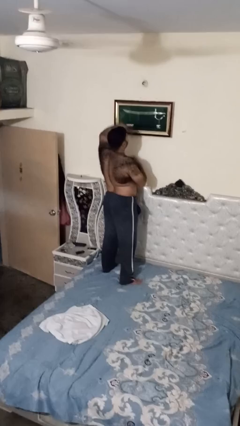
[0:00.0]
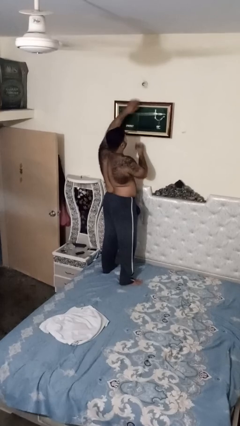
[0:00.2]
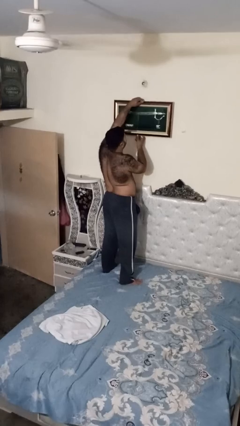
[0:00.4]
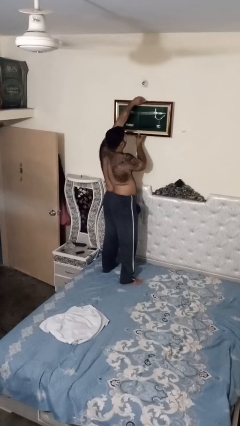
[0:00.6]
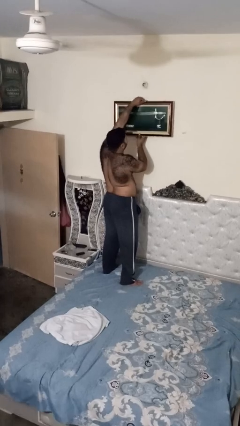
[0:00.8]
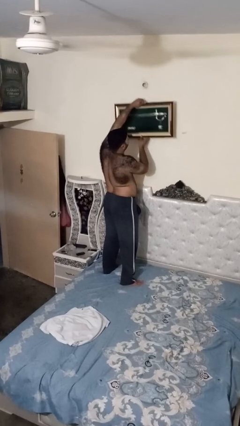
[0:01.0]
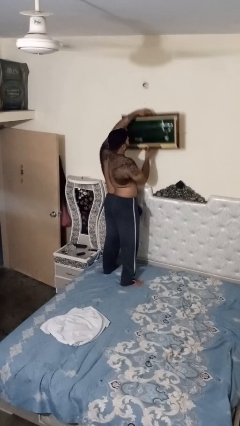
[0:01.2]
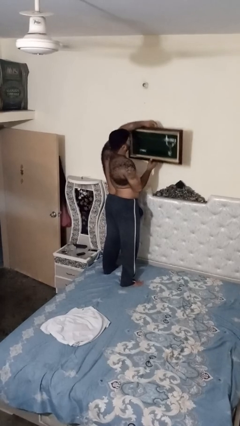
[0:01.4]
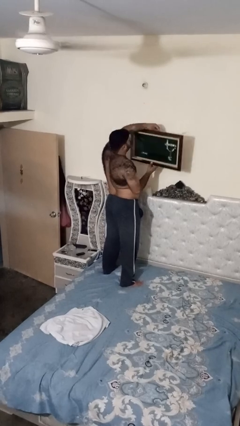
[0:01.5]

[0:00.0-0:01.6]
person takes down picture frame

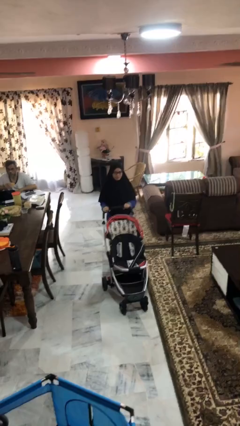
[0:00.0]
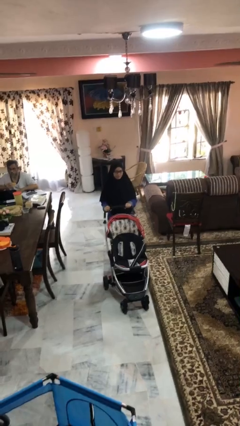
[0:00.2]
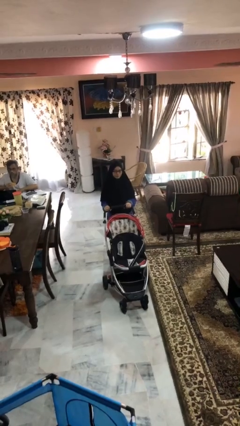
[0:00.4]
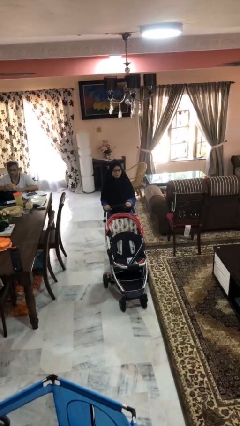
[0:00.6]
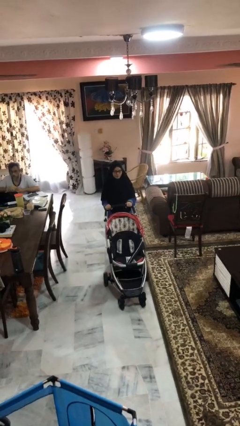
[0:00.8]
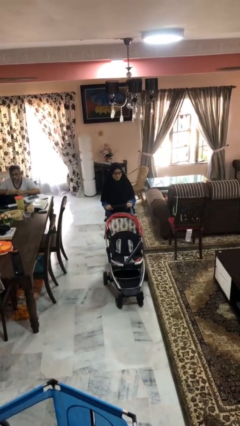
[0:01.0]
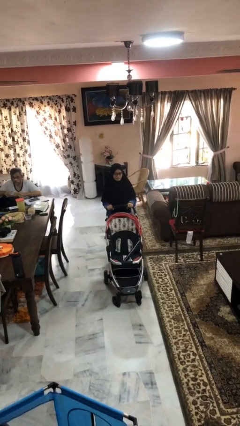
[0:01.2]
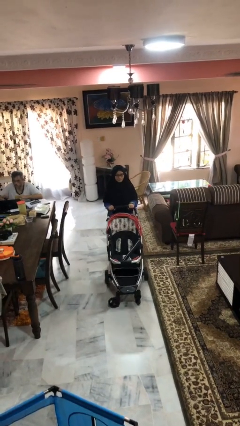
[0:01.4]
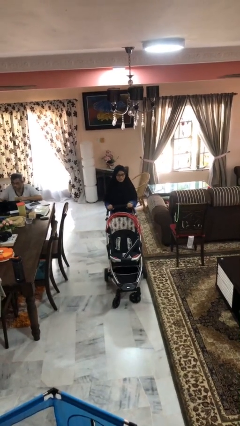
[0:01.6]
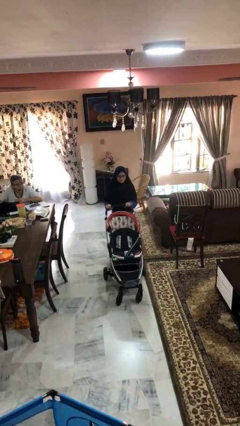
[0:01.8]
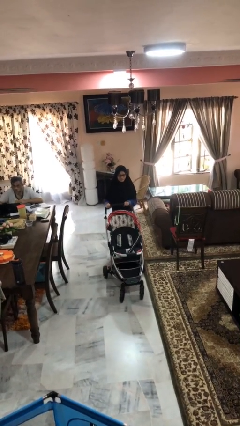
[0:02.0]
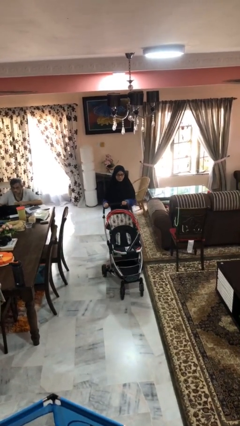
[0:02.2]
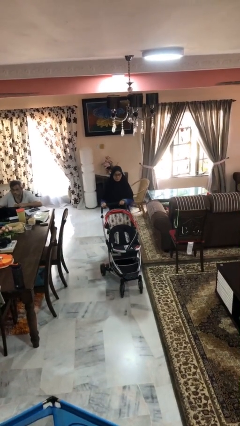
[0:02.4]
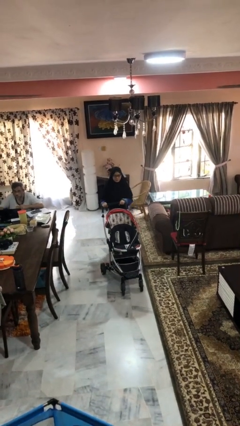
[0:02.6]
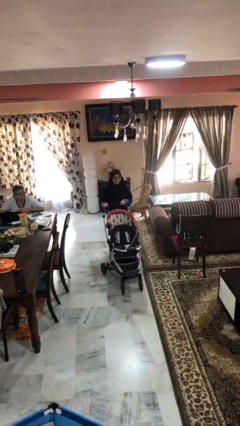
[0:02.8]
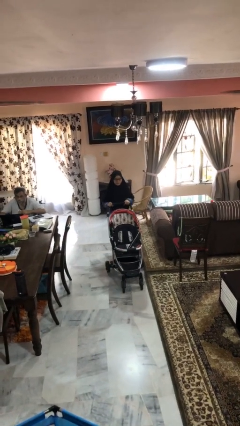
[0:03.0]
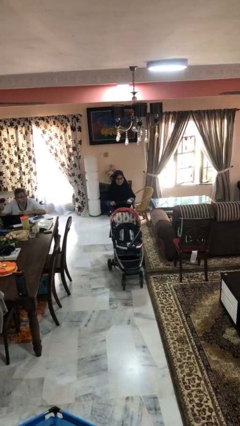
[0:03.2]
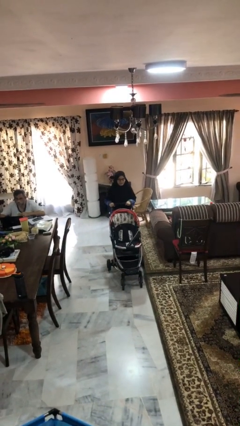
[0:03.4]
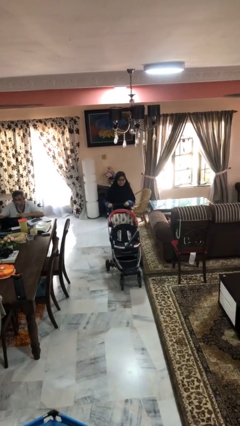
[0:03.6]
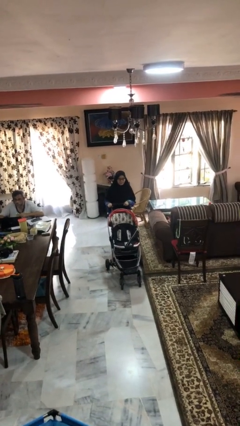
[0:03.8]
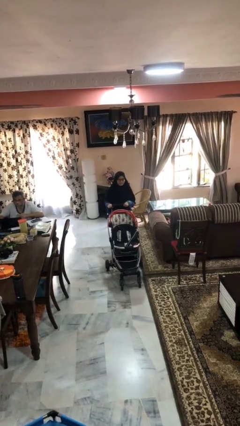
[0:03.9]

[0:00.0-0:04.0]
person pulls wheeled cart

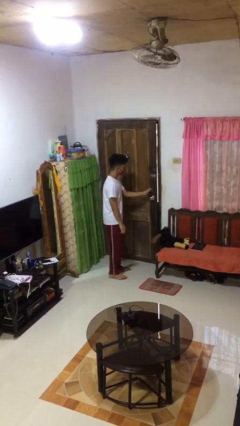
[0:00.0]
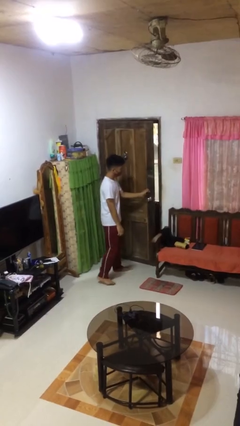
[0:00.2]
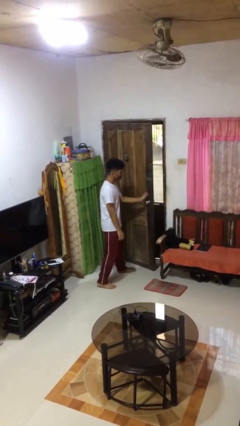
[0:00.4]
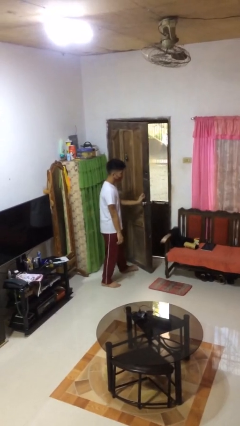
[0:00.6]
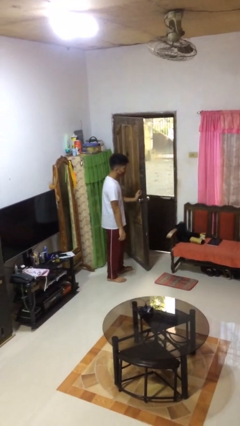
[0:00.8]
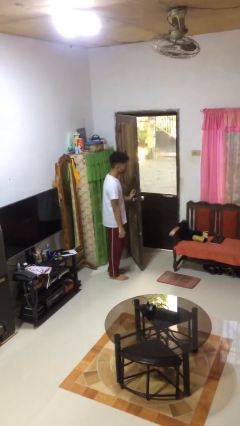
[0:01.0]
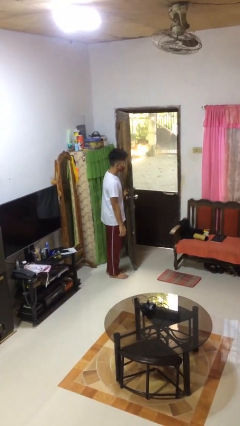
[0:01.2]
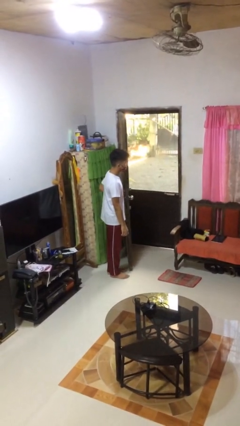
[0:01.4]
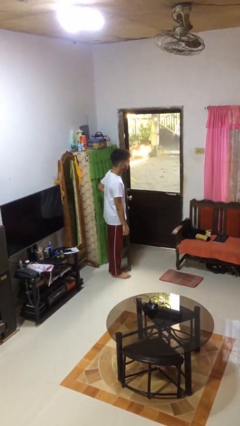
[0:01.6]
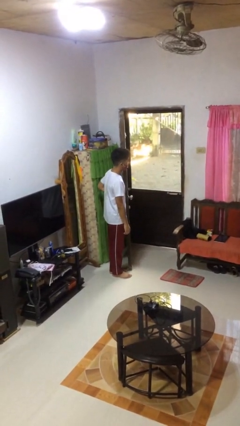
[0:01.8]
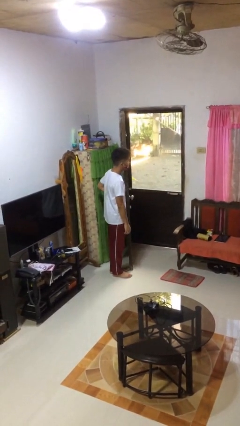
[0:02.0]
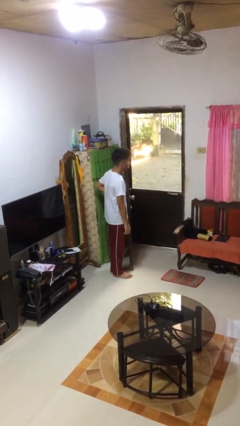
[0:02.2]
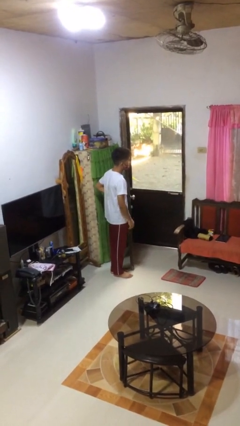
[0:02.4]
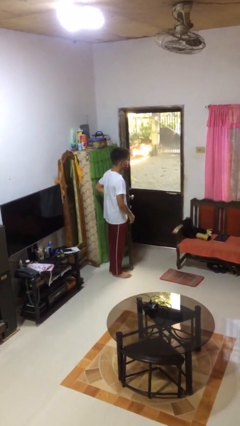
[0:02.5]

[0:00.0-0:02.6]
person opens facility door

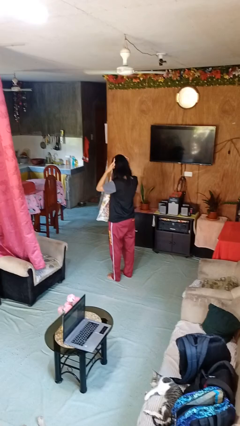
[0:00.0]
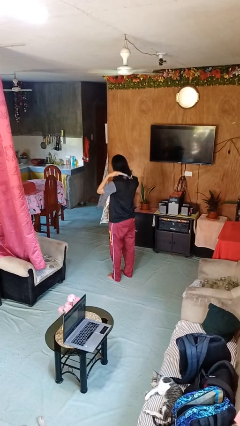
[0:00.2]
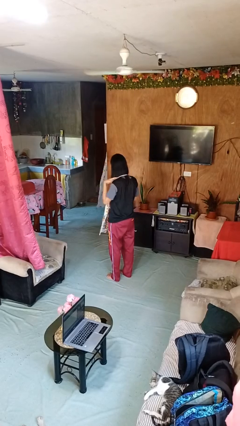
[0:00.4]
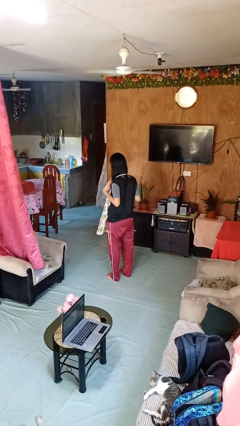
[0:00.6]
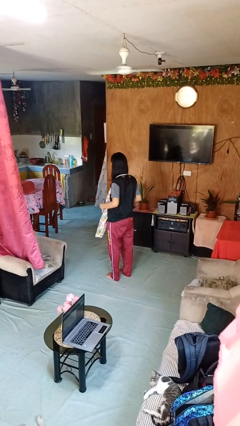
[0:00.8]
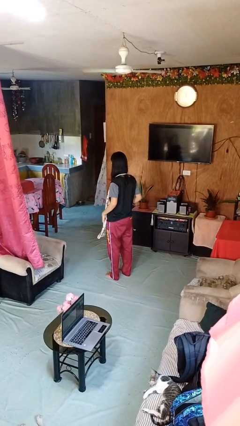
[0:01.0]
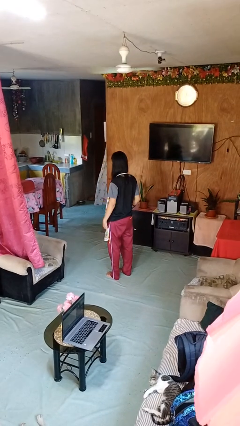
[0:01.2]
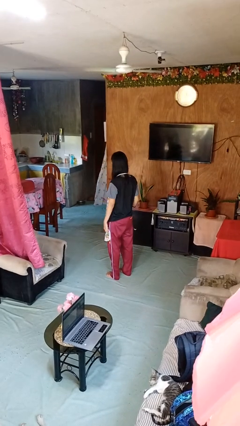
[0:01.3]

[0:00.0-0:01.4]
person puts on apron

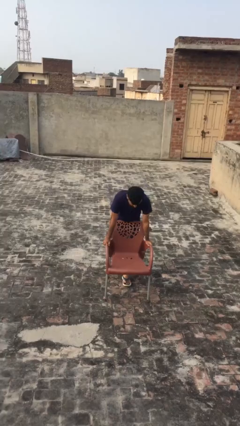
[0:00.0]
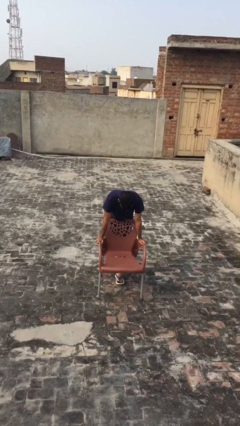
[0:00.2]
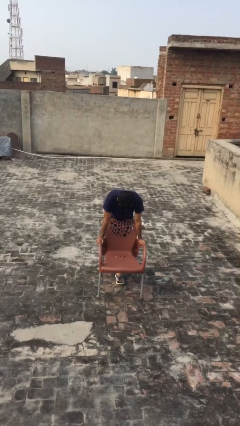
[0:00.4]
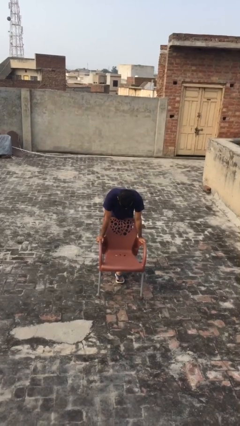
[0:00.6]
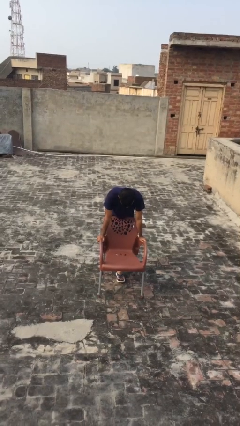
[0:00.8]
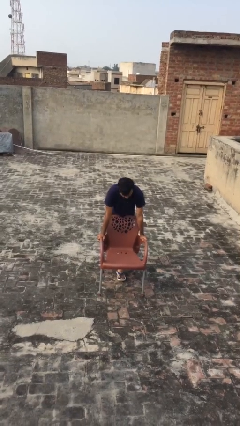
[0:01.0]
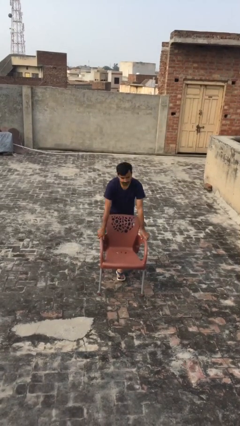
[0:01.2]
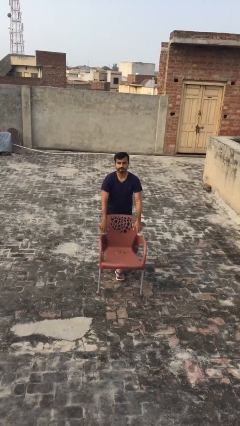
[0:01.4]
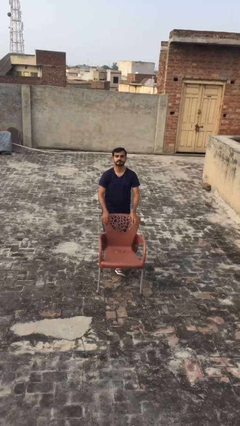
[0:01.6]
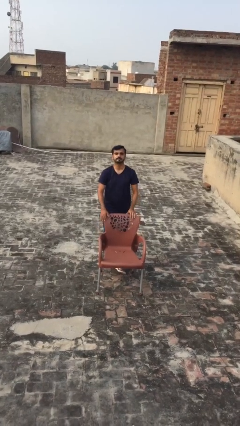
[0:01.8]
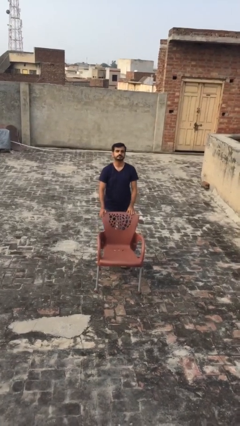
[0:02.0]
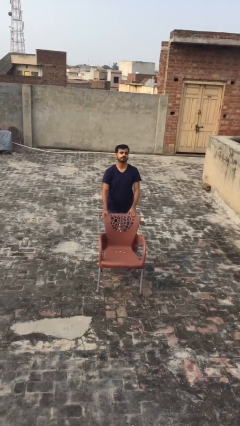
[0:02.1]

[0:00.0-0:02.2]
person puts down object on floor

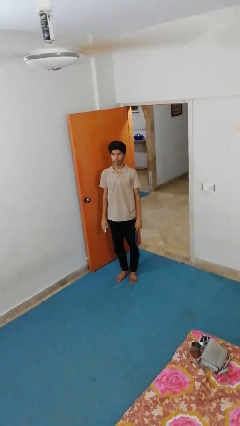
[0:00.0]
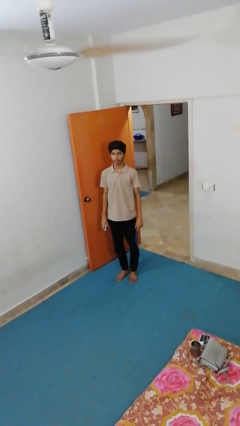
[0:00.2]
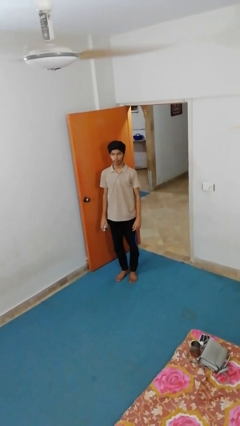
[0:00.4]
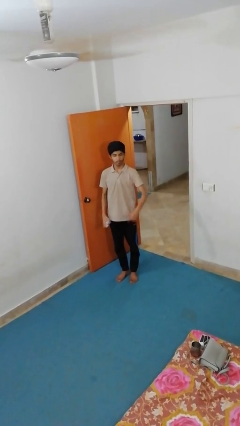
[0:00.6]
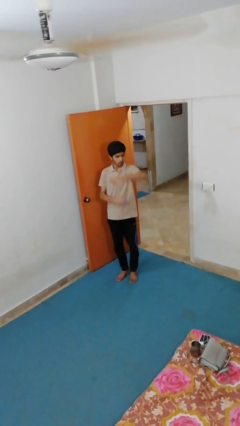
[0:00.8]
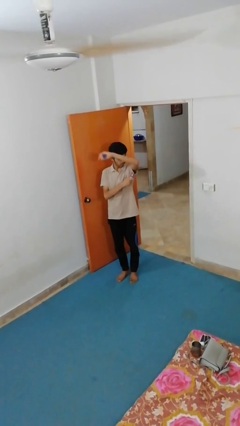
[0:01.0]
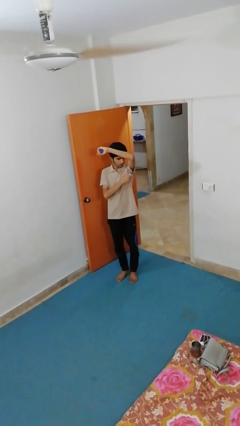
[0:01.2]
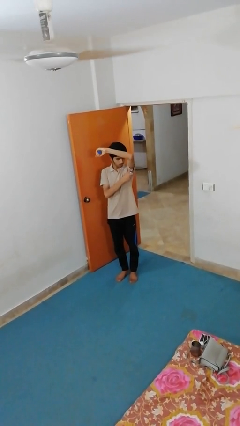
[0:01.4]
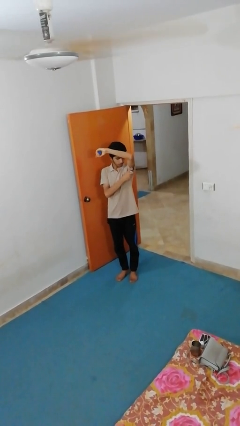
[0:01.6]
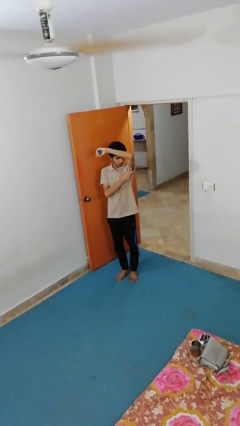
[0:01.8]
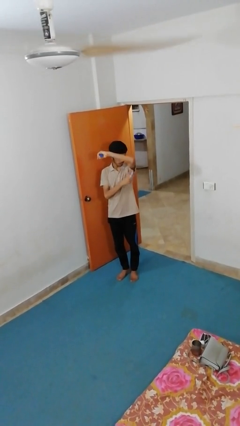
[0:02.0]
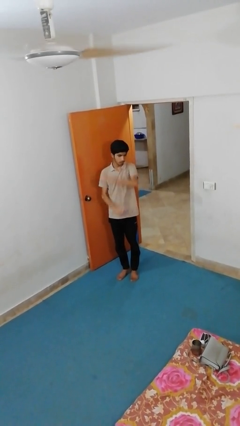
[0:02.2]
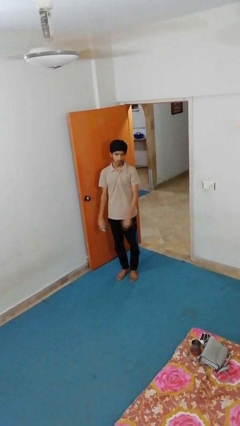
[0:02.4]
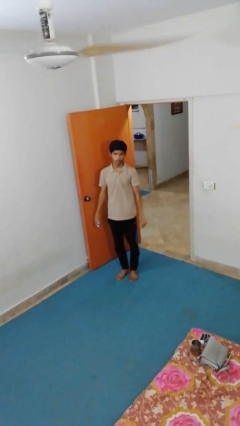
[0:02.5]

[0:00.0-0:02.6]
person applies deodorant

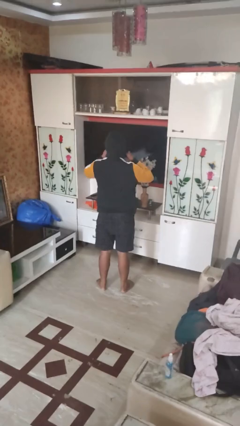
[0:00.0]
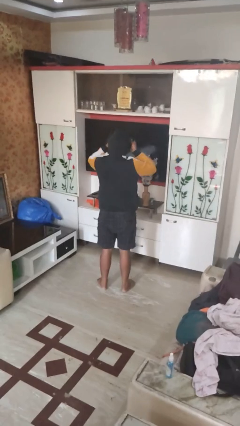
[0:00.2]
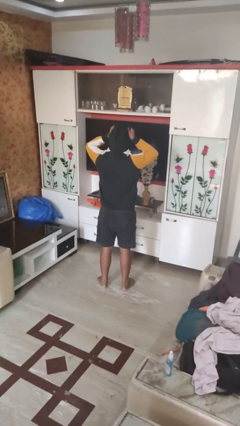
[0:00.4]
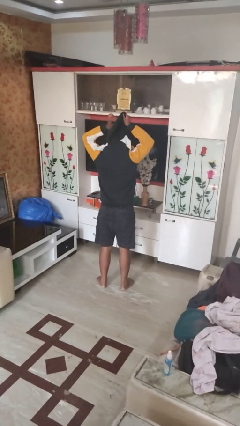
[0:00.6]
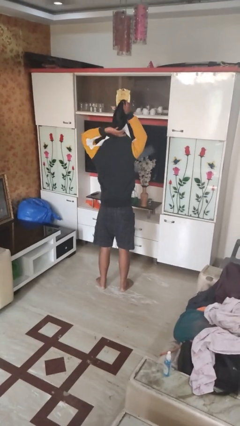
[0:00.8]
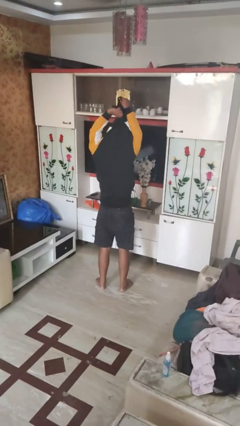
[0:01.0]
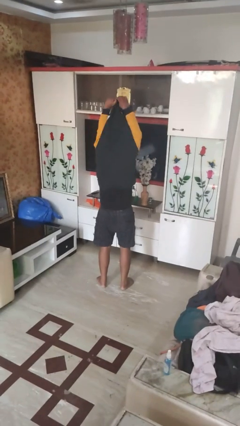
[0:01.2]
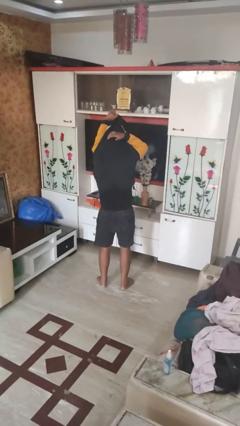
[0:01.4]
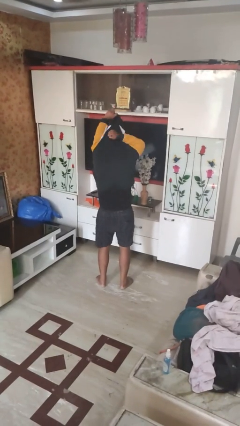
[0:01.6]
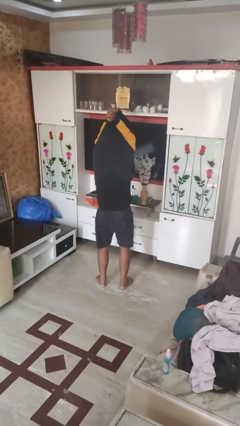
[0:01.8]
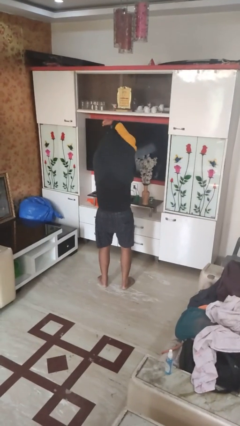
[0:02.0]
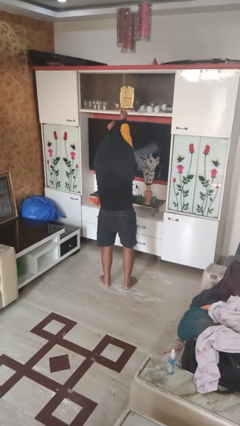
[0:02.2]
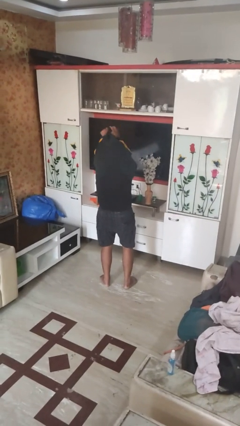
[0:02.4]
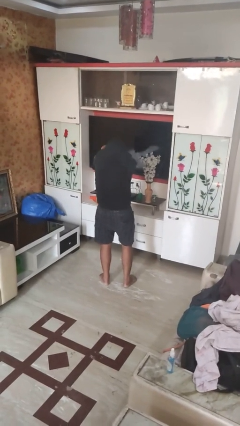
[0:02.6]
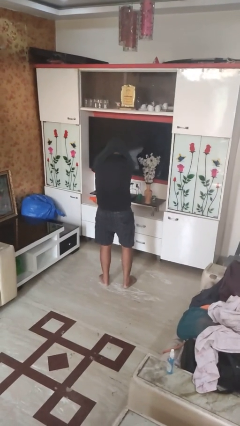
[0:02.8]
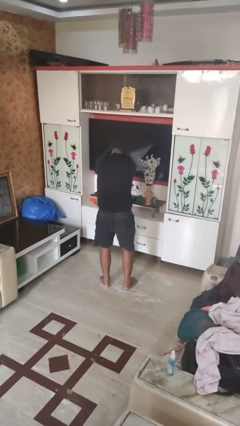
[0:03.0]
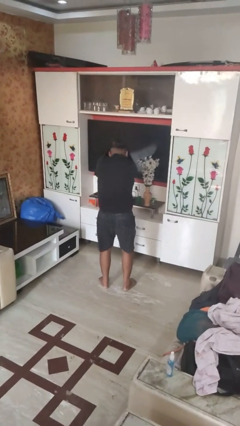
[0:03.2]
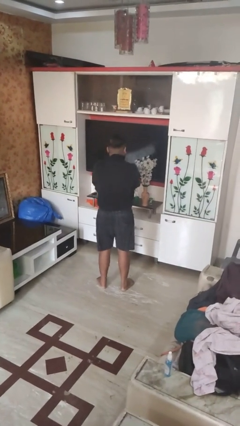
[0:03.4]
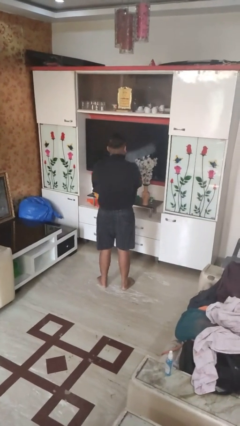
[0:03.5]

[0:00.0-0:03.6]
person takes off hoodie
